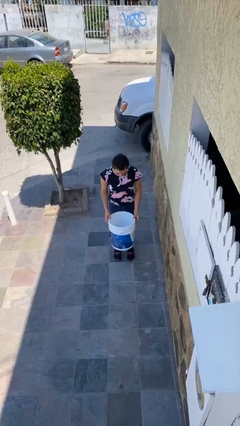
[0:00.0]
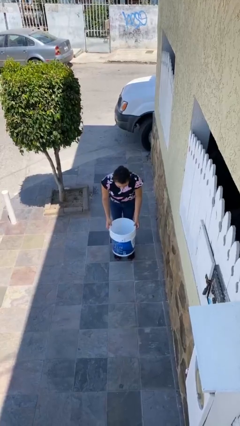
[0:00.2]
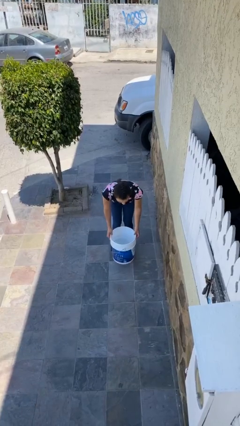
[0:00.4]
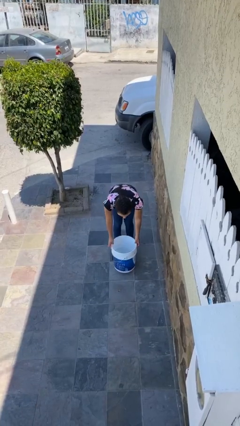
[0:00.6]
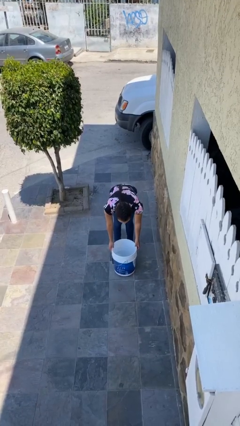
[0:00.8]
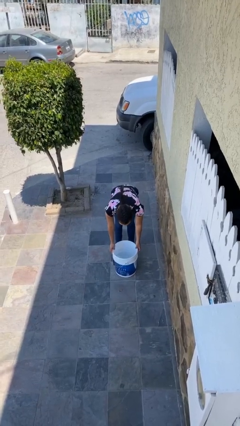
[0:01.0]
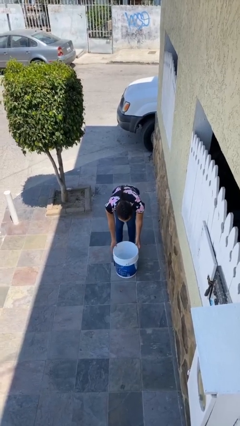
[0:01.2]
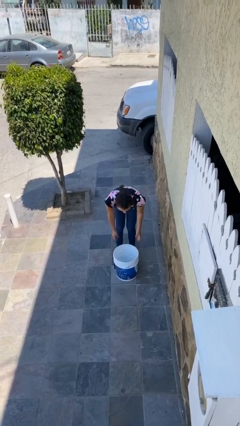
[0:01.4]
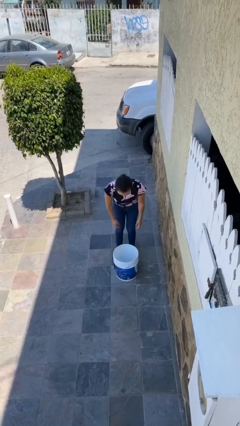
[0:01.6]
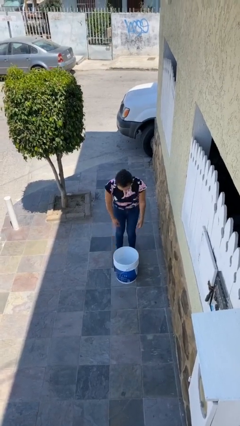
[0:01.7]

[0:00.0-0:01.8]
person puts down object on floor

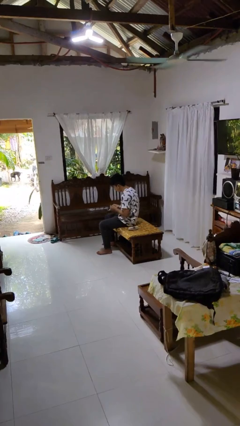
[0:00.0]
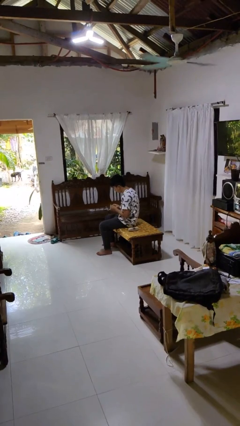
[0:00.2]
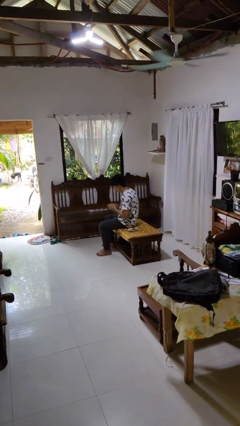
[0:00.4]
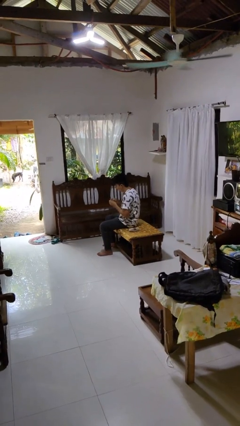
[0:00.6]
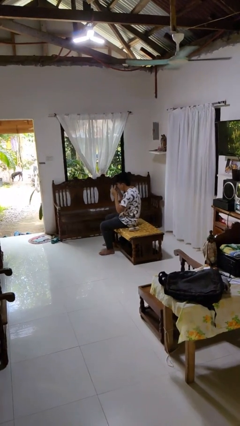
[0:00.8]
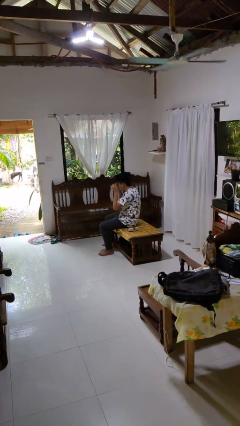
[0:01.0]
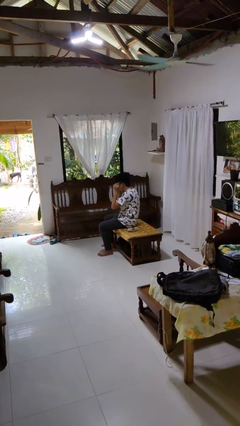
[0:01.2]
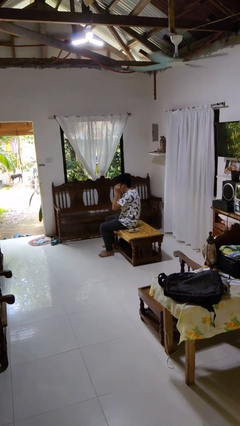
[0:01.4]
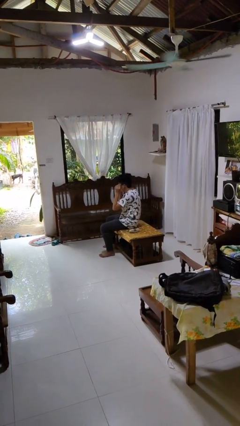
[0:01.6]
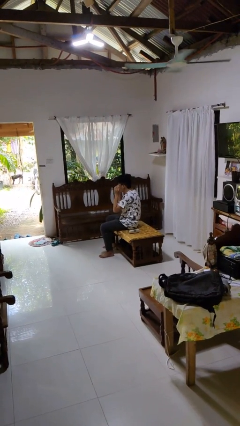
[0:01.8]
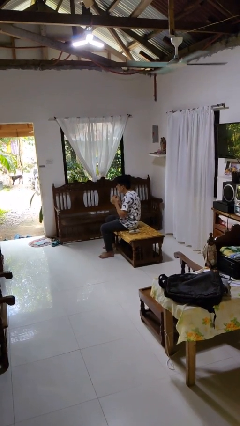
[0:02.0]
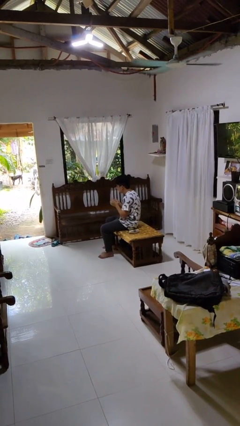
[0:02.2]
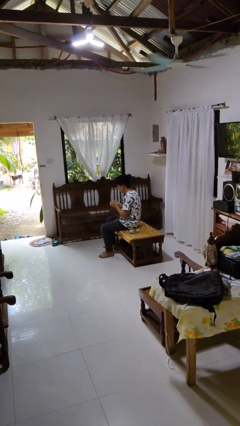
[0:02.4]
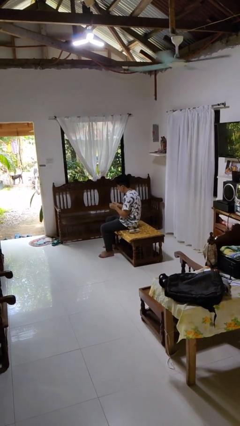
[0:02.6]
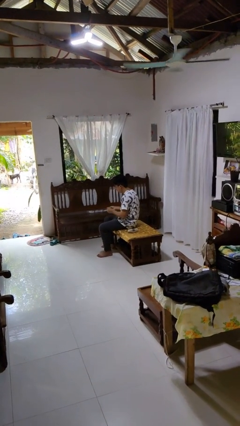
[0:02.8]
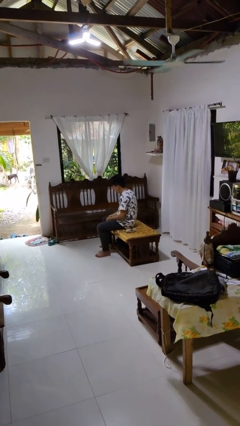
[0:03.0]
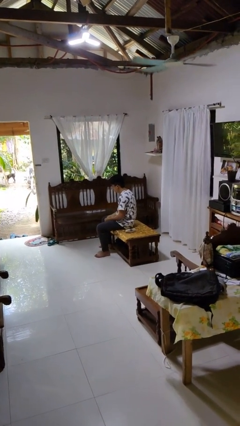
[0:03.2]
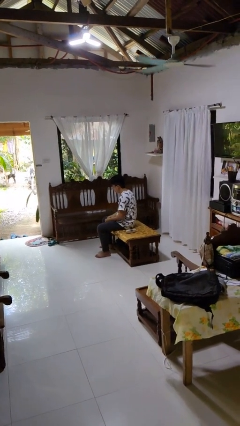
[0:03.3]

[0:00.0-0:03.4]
person puts on glasses

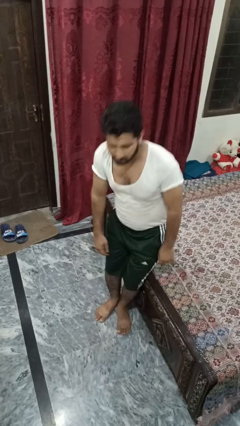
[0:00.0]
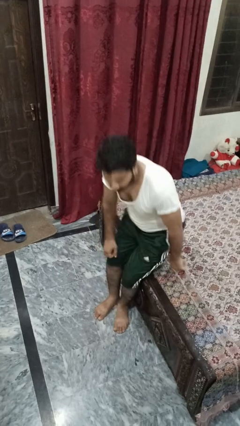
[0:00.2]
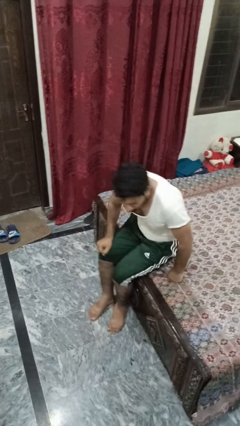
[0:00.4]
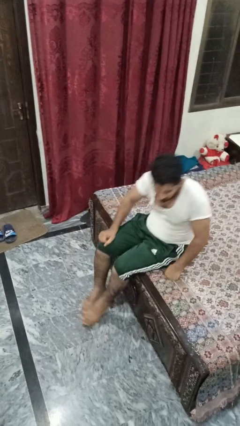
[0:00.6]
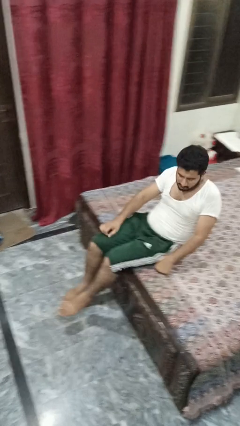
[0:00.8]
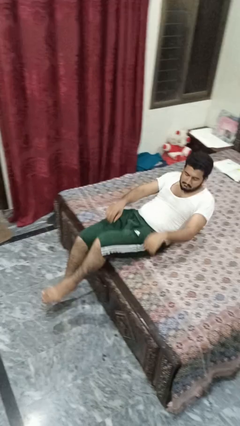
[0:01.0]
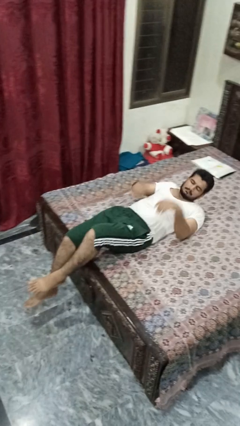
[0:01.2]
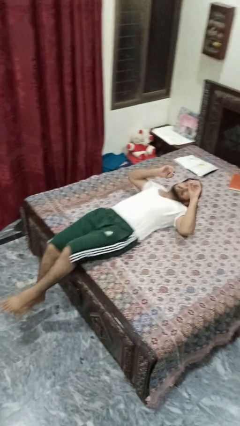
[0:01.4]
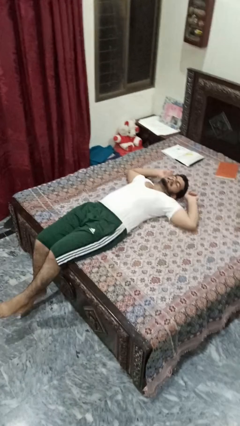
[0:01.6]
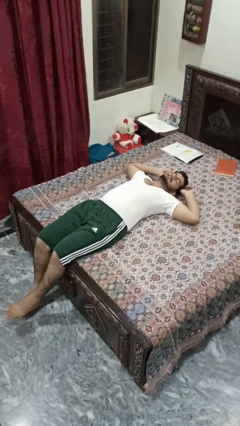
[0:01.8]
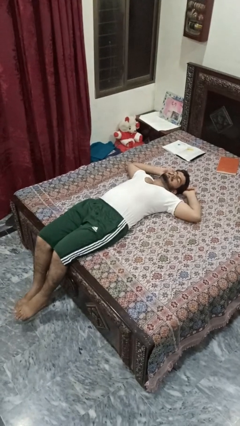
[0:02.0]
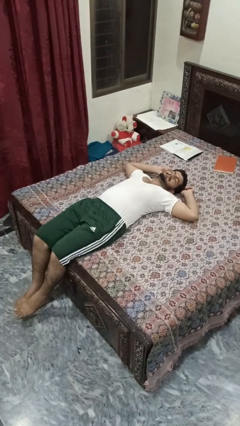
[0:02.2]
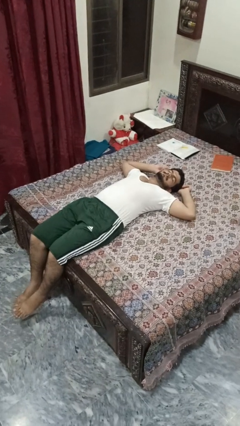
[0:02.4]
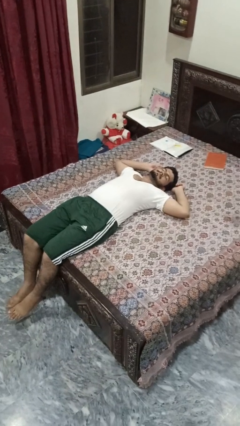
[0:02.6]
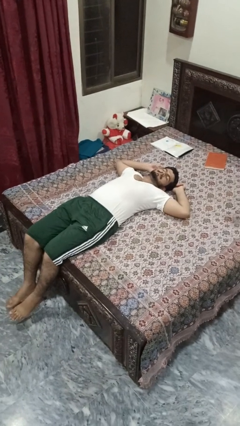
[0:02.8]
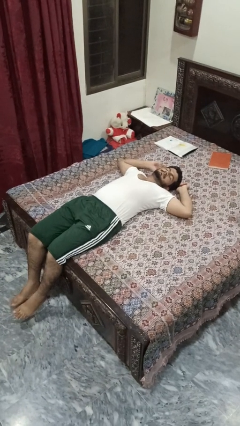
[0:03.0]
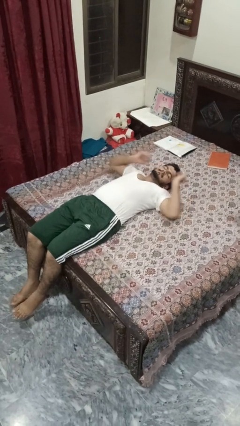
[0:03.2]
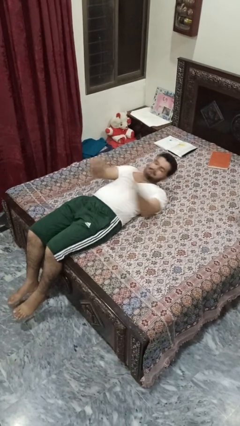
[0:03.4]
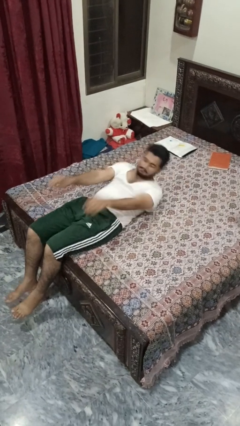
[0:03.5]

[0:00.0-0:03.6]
person lies down on bed

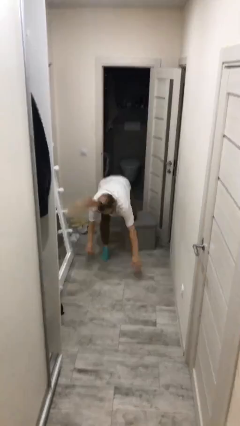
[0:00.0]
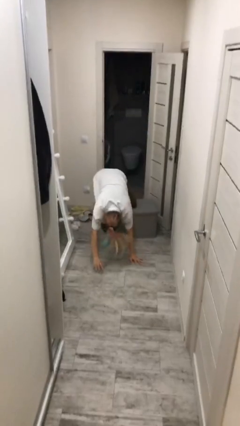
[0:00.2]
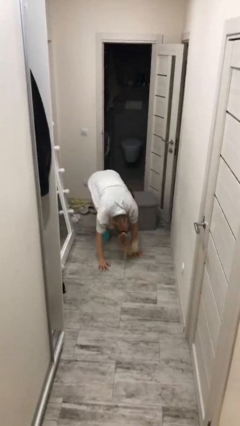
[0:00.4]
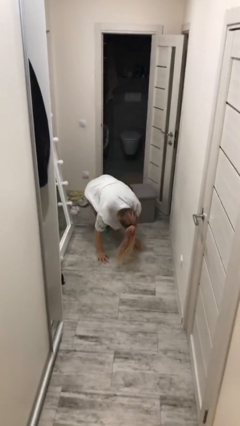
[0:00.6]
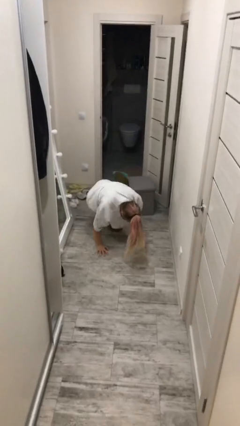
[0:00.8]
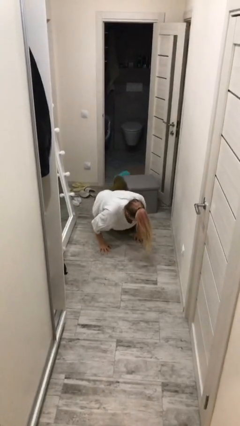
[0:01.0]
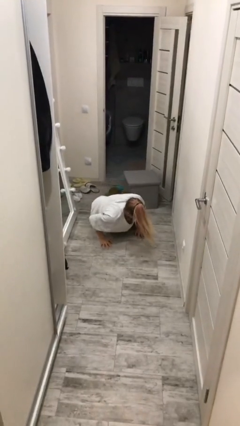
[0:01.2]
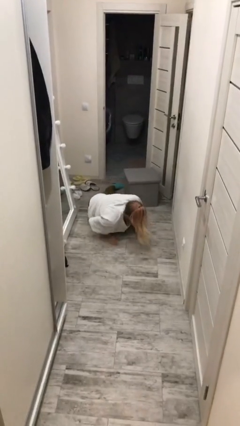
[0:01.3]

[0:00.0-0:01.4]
person trips on object on floor

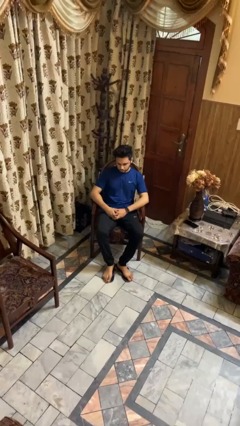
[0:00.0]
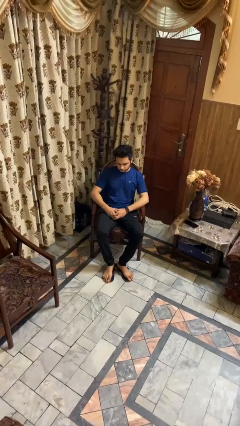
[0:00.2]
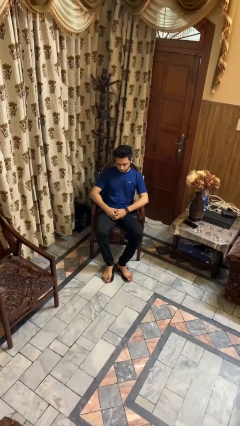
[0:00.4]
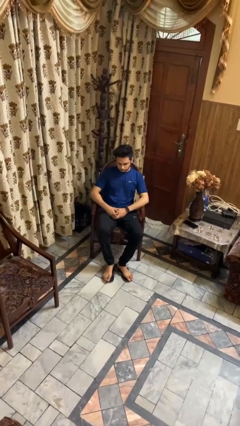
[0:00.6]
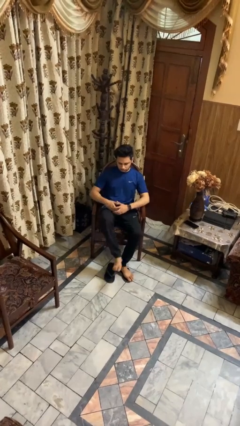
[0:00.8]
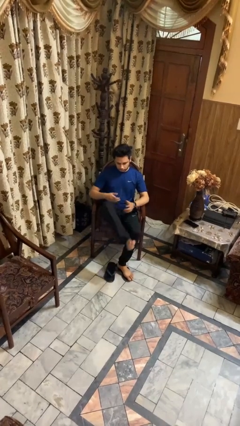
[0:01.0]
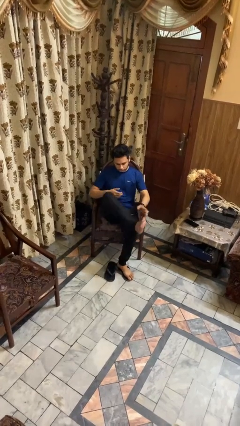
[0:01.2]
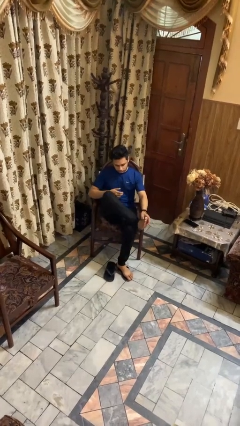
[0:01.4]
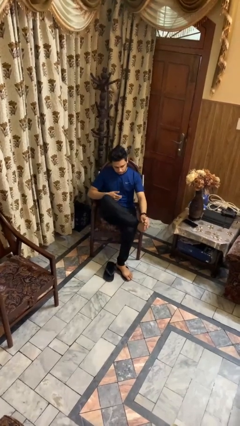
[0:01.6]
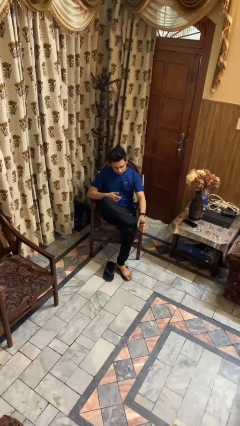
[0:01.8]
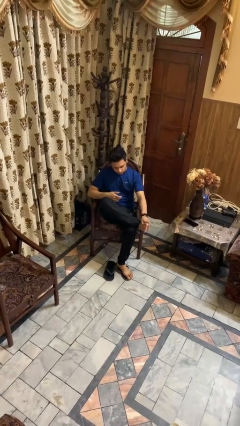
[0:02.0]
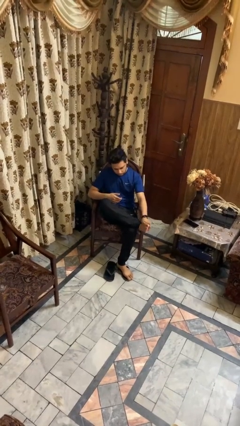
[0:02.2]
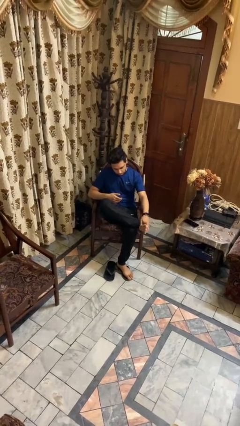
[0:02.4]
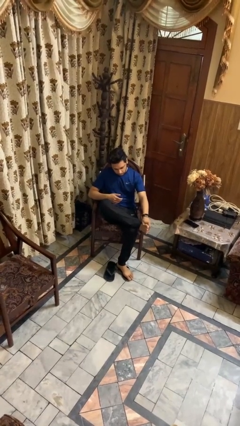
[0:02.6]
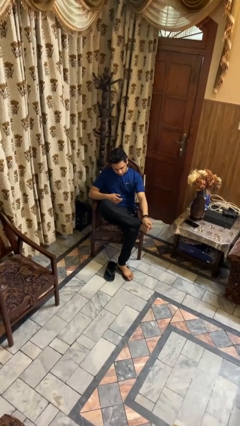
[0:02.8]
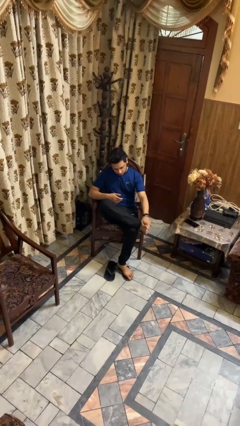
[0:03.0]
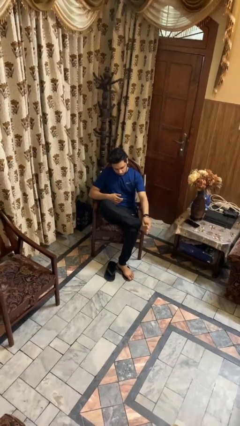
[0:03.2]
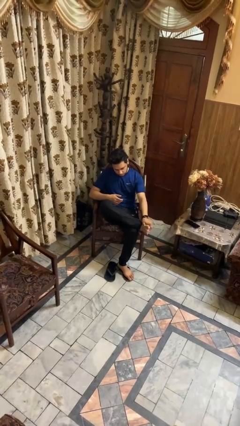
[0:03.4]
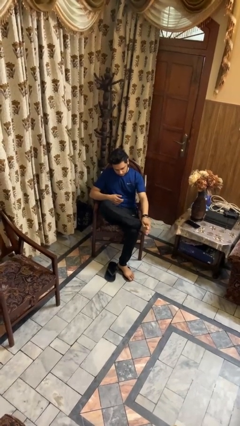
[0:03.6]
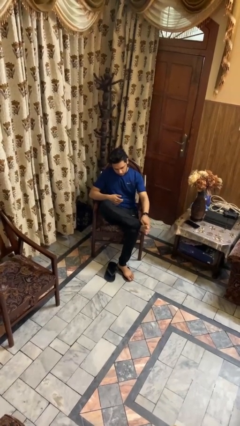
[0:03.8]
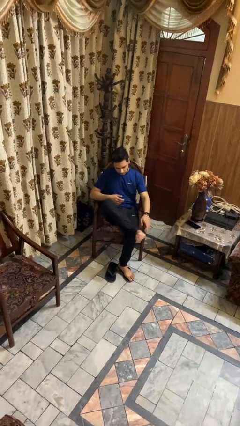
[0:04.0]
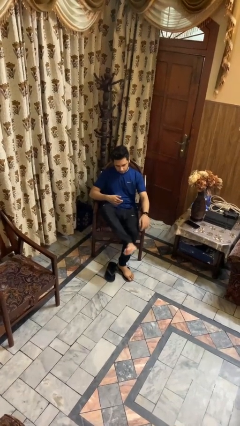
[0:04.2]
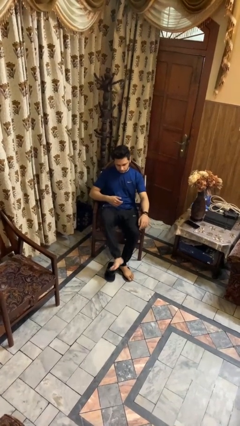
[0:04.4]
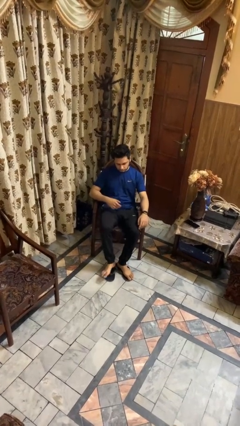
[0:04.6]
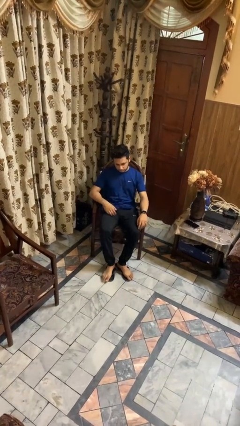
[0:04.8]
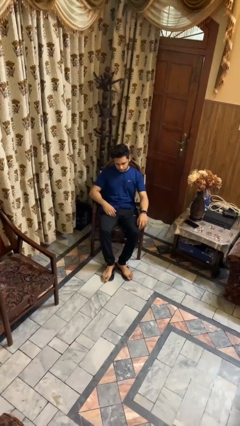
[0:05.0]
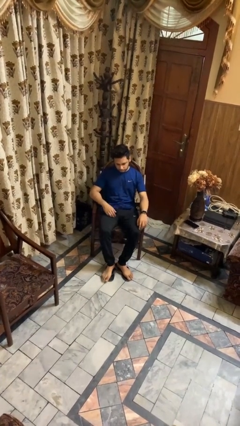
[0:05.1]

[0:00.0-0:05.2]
person rubs foot

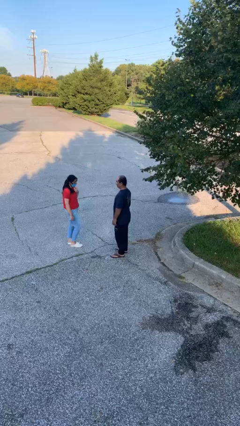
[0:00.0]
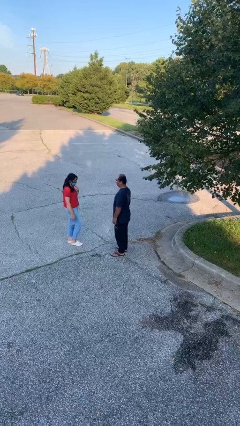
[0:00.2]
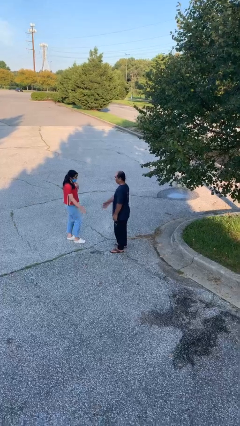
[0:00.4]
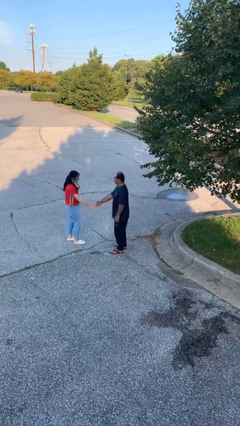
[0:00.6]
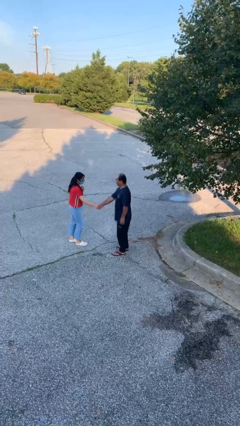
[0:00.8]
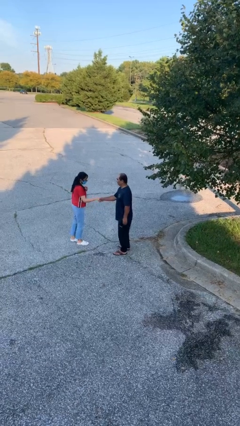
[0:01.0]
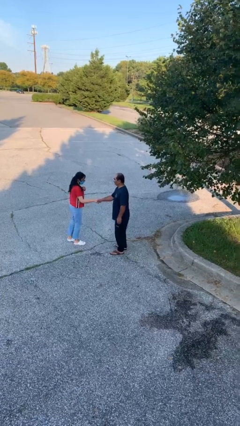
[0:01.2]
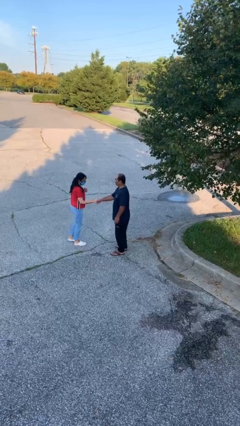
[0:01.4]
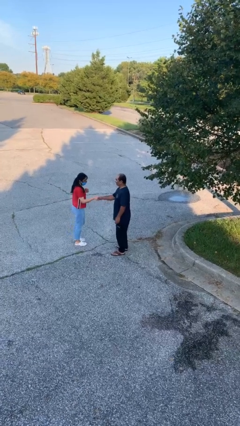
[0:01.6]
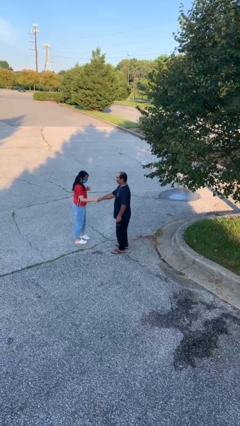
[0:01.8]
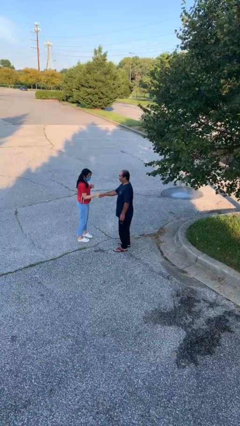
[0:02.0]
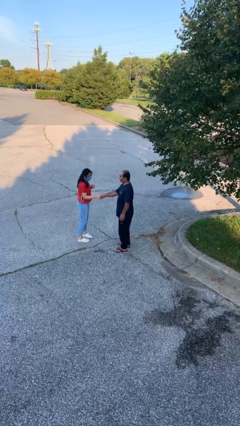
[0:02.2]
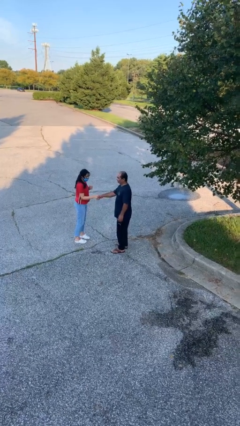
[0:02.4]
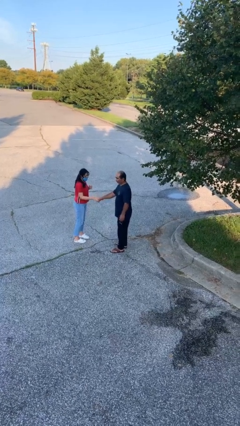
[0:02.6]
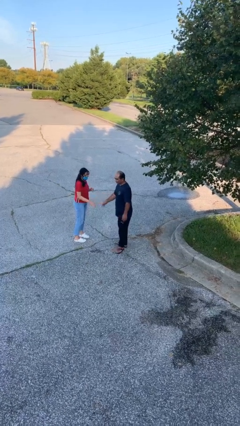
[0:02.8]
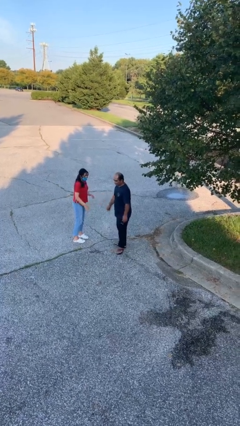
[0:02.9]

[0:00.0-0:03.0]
person shakes hand
